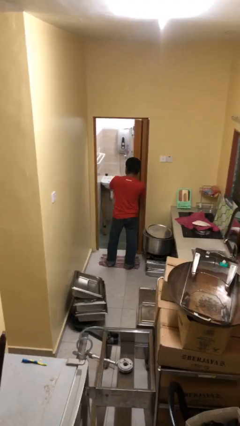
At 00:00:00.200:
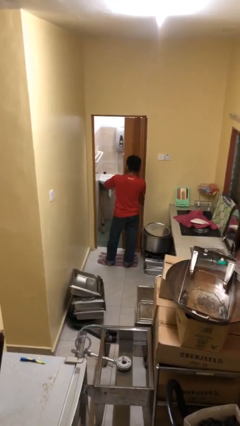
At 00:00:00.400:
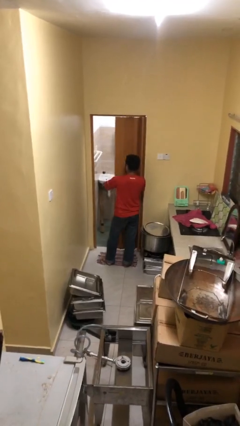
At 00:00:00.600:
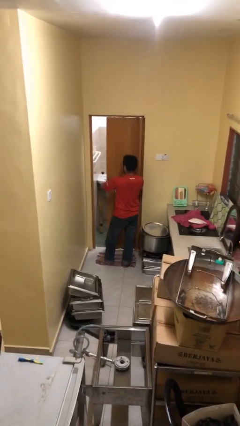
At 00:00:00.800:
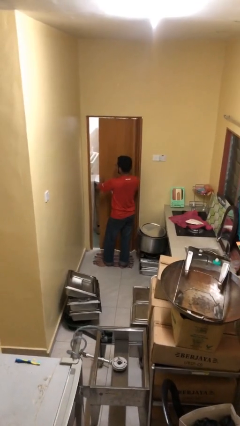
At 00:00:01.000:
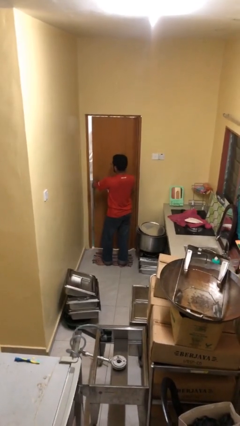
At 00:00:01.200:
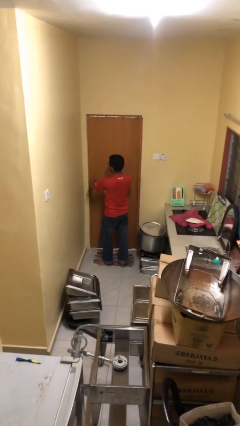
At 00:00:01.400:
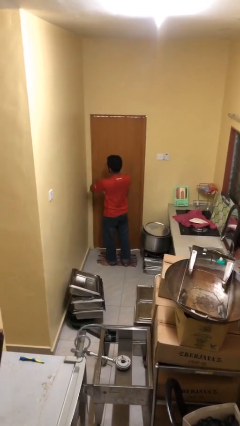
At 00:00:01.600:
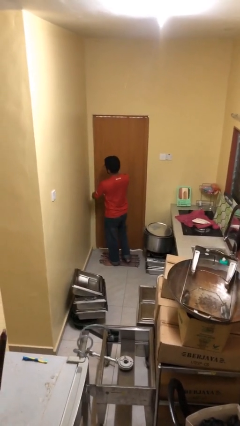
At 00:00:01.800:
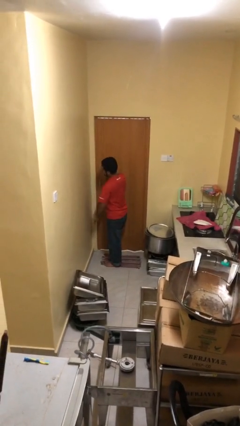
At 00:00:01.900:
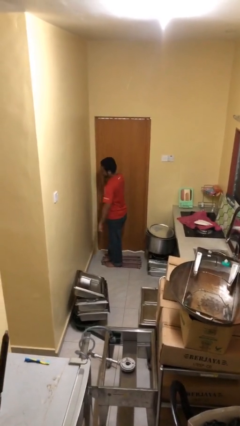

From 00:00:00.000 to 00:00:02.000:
person closes facility door

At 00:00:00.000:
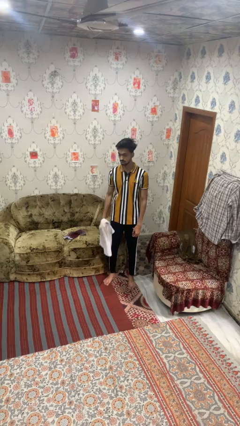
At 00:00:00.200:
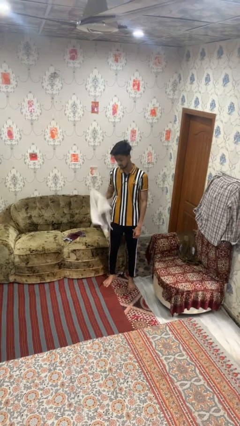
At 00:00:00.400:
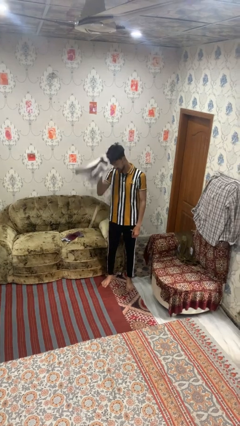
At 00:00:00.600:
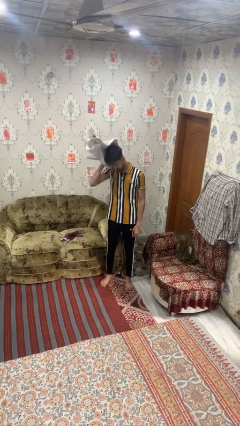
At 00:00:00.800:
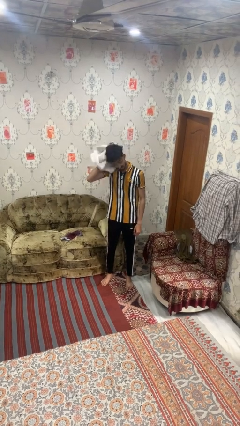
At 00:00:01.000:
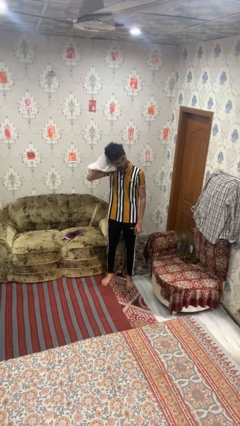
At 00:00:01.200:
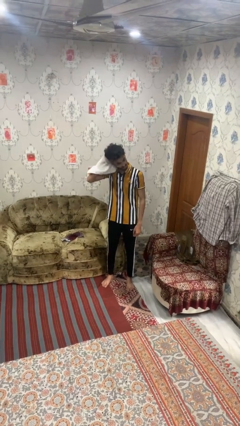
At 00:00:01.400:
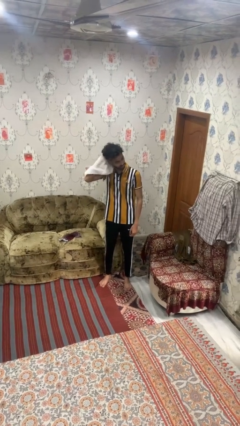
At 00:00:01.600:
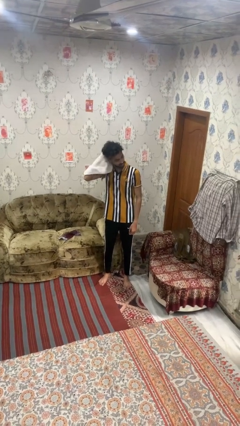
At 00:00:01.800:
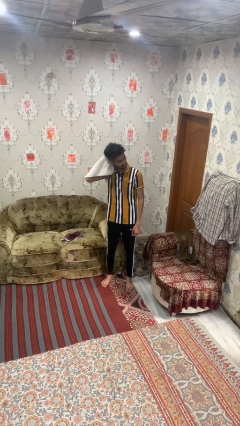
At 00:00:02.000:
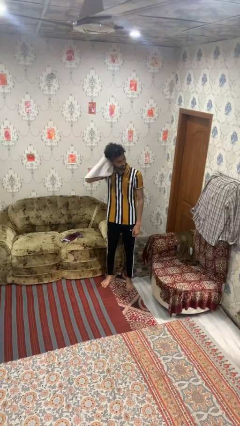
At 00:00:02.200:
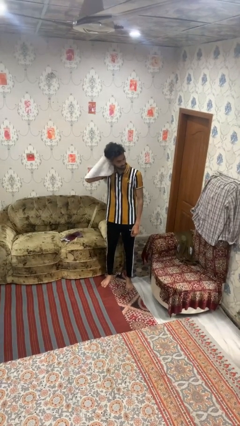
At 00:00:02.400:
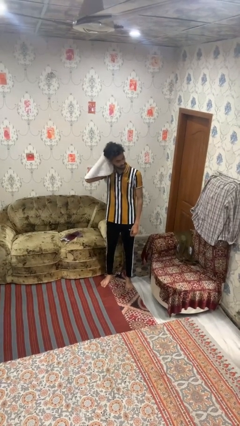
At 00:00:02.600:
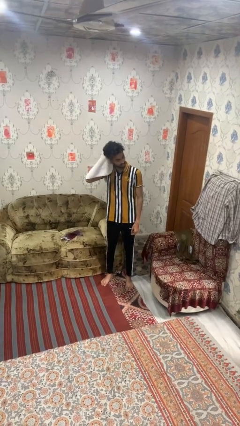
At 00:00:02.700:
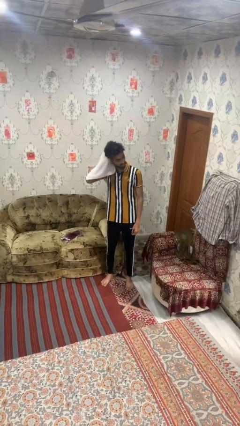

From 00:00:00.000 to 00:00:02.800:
person dries hair with towel

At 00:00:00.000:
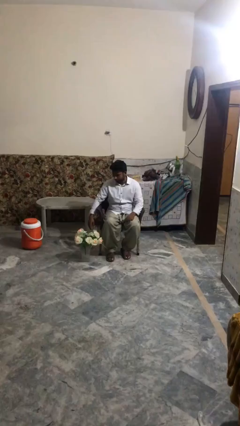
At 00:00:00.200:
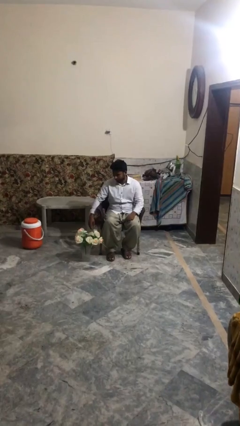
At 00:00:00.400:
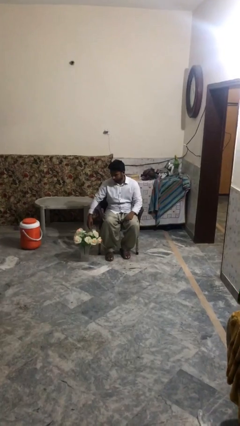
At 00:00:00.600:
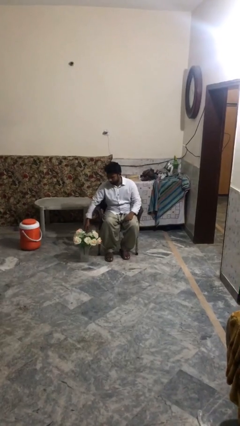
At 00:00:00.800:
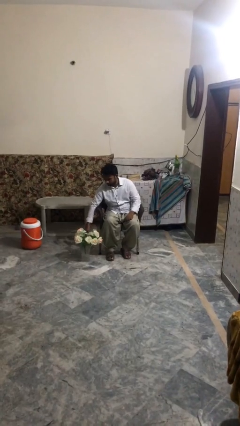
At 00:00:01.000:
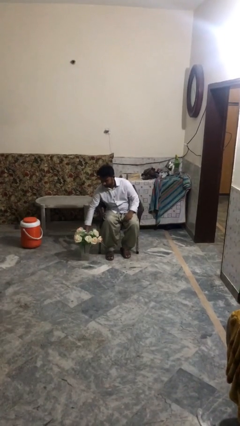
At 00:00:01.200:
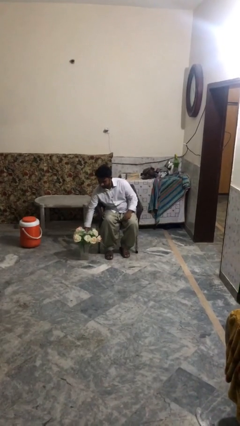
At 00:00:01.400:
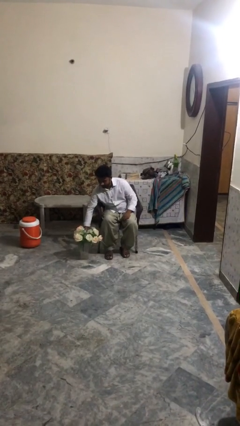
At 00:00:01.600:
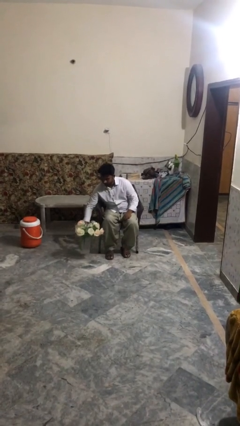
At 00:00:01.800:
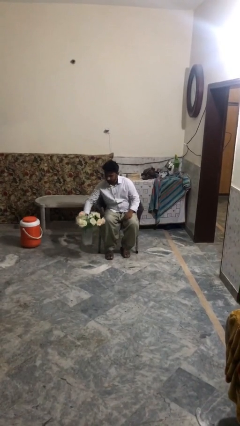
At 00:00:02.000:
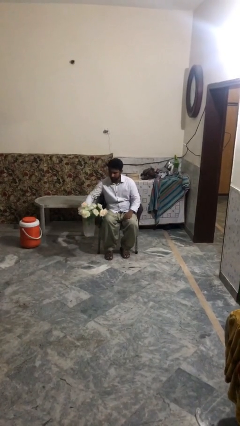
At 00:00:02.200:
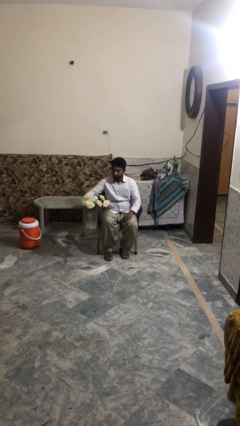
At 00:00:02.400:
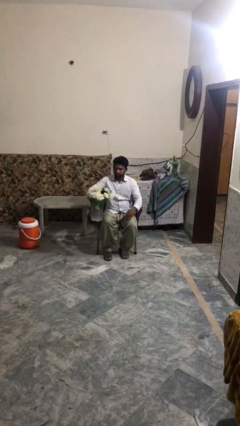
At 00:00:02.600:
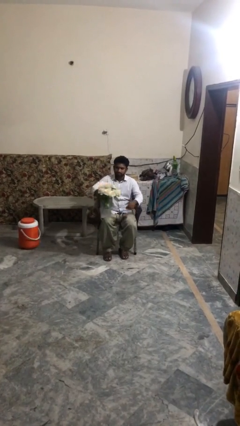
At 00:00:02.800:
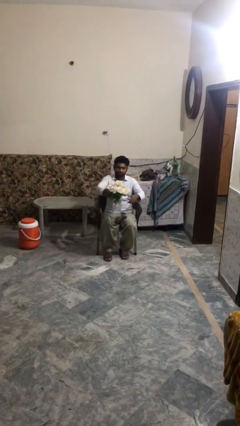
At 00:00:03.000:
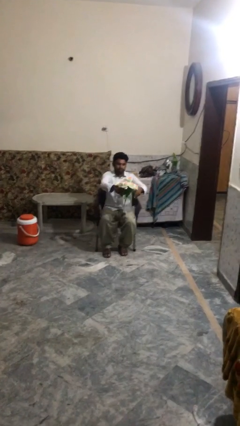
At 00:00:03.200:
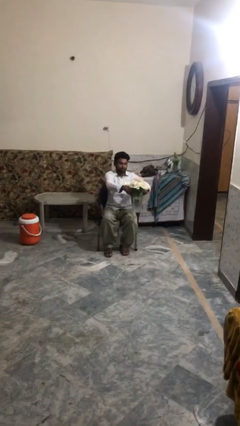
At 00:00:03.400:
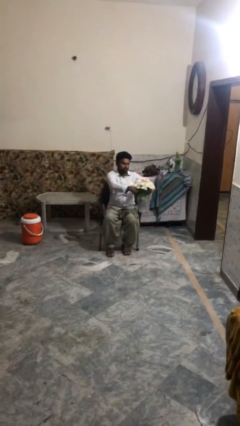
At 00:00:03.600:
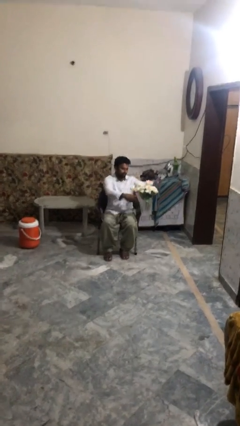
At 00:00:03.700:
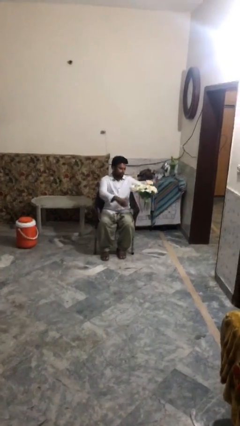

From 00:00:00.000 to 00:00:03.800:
person picks up object from floor

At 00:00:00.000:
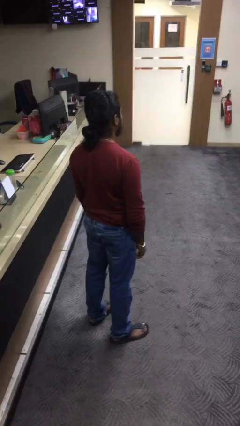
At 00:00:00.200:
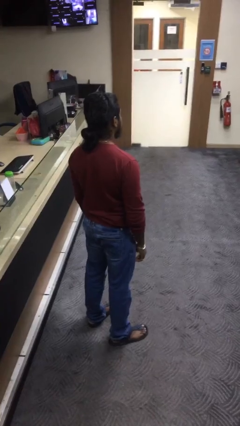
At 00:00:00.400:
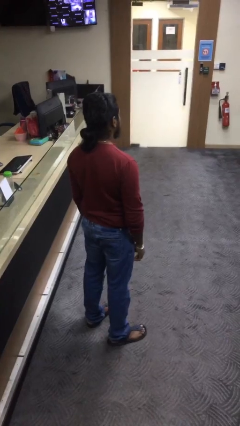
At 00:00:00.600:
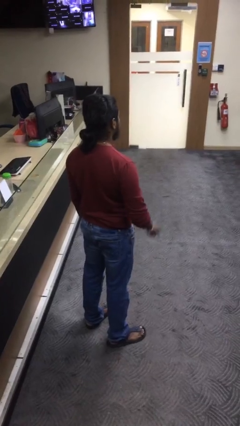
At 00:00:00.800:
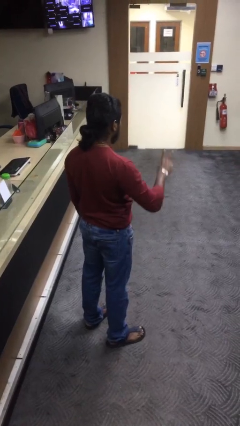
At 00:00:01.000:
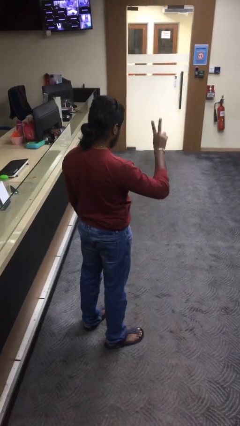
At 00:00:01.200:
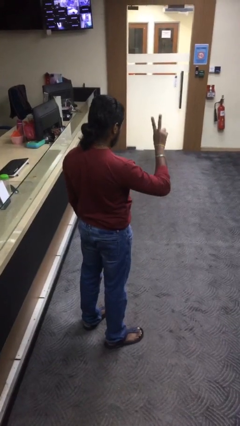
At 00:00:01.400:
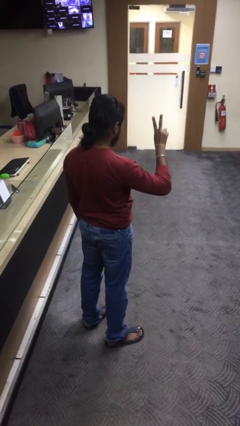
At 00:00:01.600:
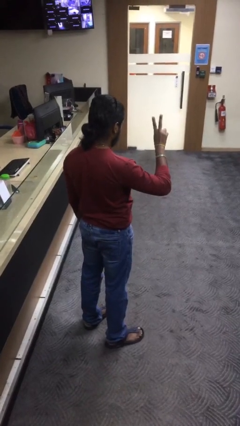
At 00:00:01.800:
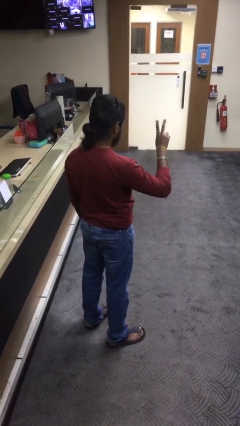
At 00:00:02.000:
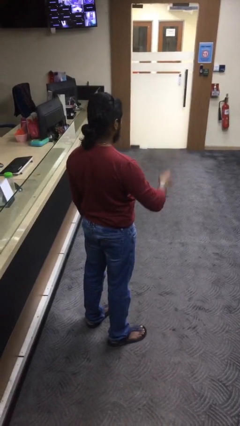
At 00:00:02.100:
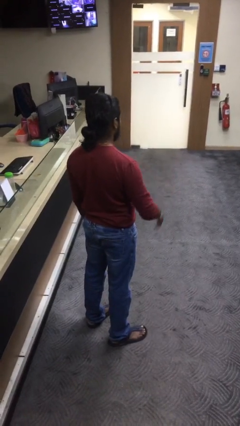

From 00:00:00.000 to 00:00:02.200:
person gestures peace

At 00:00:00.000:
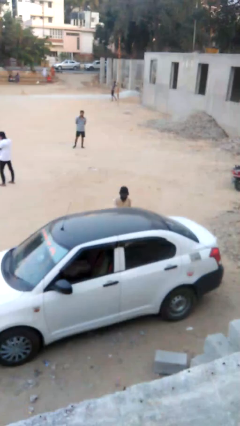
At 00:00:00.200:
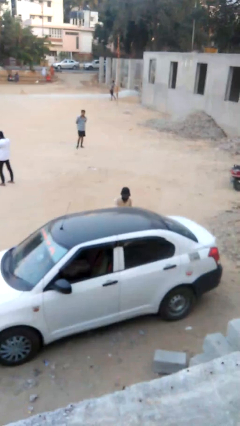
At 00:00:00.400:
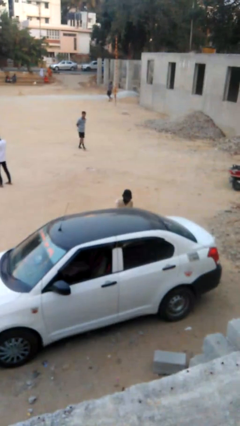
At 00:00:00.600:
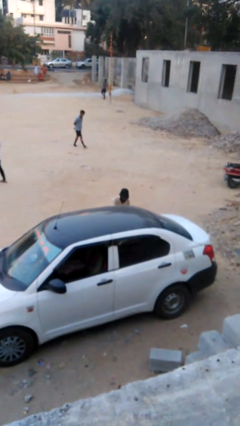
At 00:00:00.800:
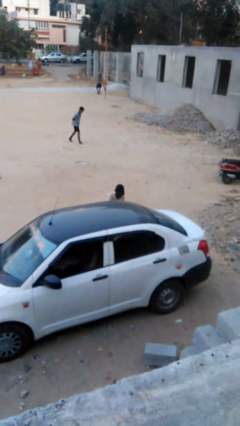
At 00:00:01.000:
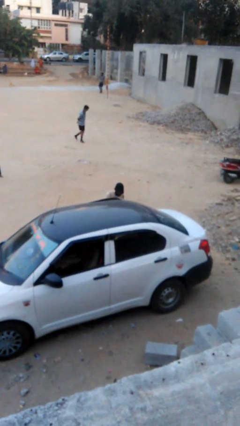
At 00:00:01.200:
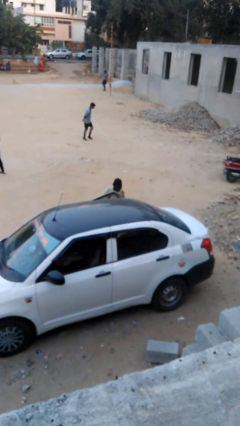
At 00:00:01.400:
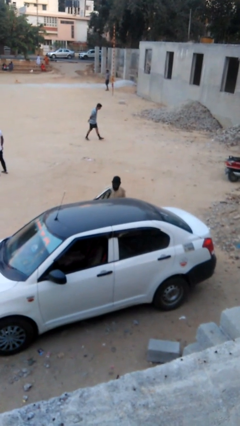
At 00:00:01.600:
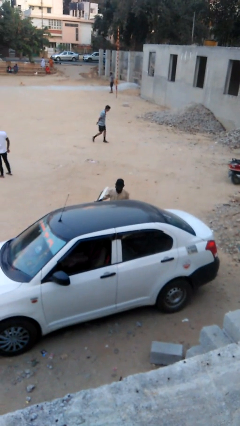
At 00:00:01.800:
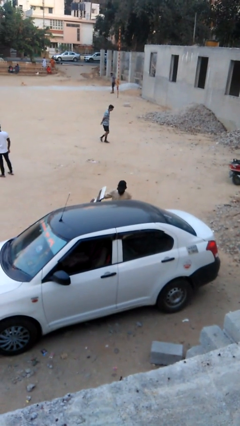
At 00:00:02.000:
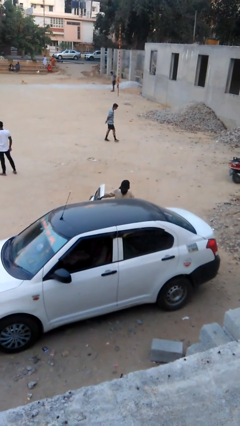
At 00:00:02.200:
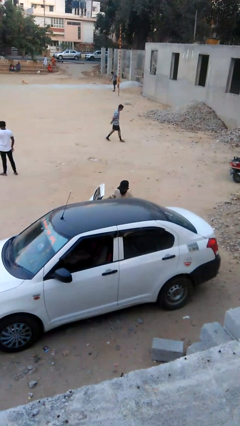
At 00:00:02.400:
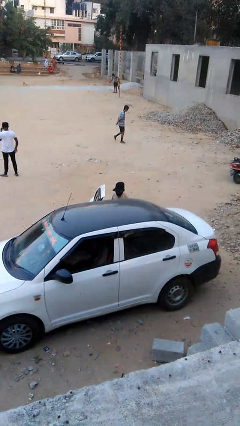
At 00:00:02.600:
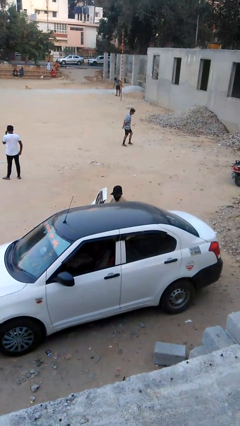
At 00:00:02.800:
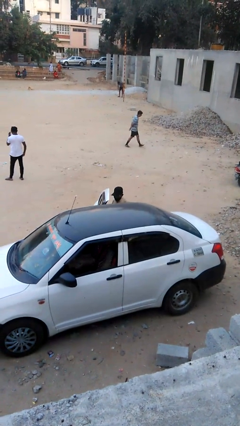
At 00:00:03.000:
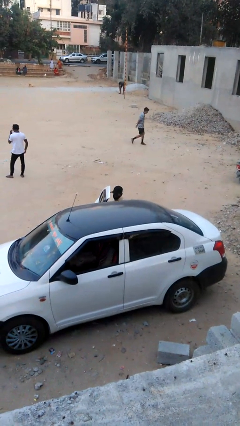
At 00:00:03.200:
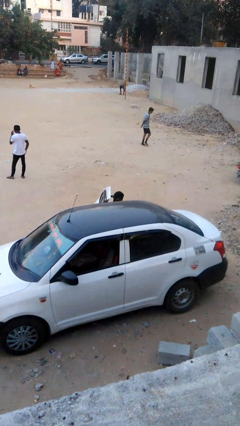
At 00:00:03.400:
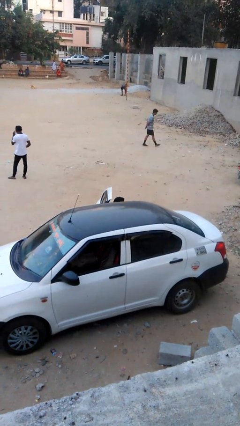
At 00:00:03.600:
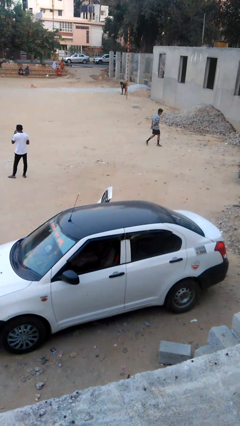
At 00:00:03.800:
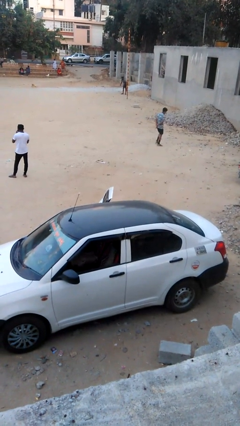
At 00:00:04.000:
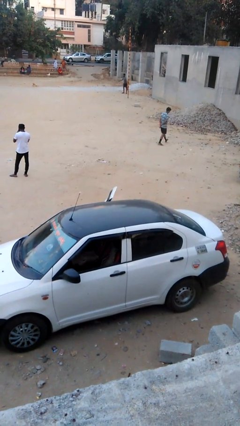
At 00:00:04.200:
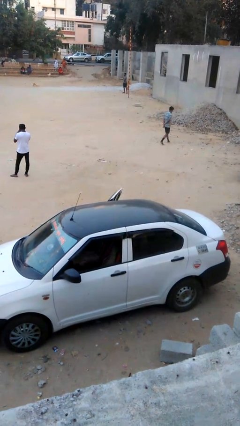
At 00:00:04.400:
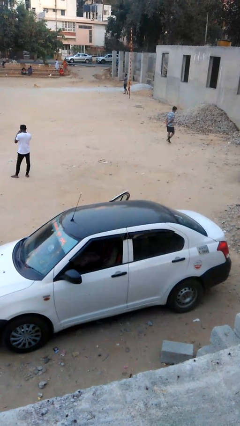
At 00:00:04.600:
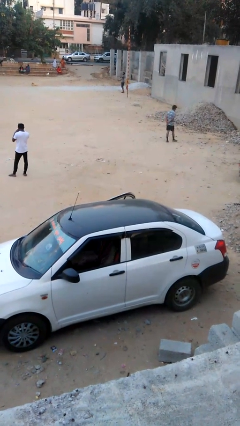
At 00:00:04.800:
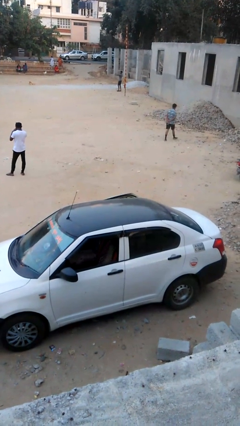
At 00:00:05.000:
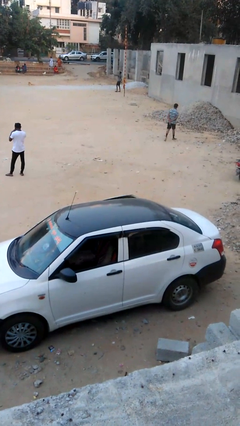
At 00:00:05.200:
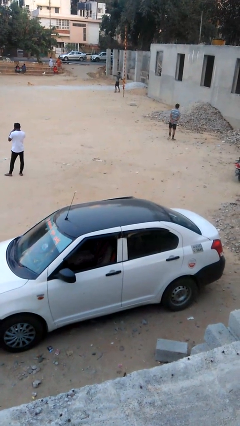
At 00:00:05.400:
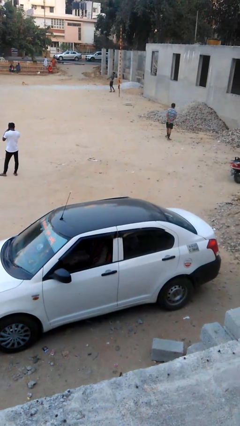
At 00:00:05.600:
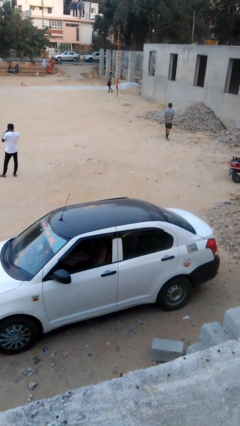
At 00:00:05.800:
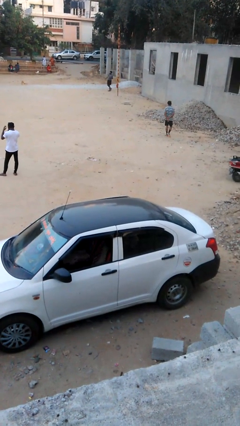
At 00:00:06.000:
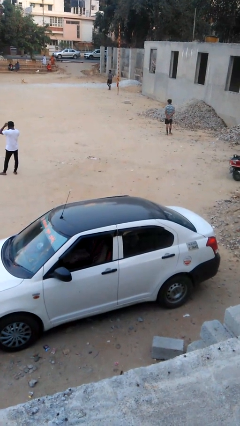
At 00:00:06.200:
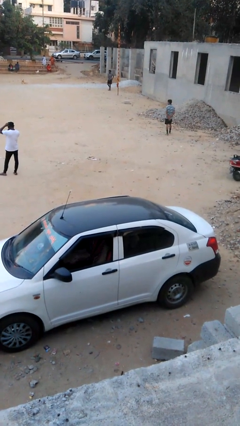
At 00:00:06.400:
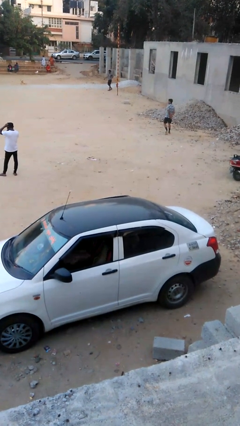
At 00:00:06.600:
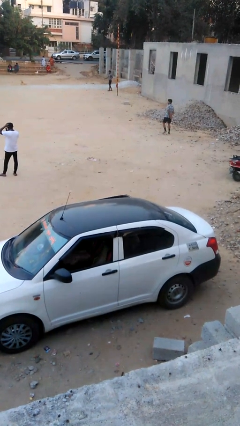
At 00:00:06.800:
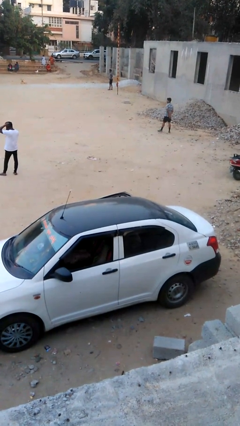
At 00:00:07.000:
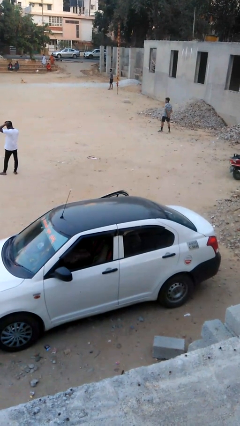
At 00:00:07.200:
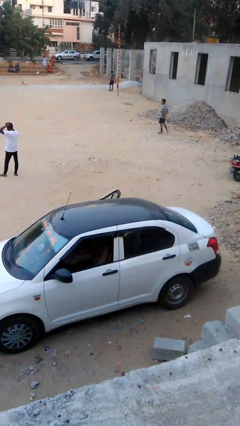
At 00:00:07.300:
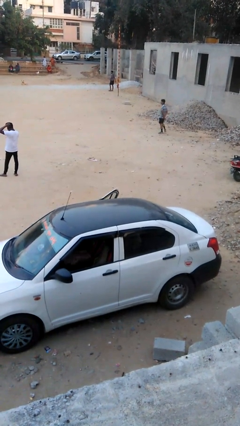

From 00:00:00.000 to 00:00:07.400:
person enters car
